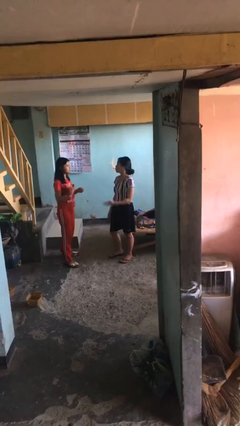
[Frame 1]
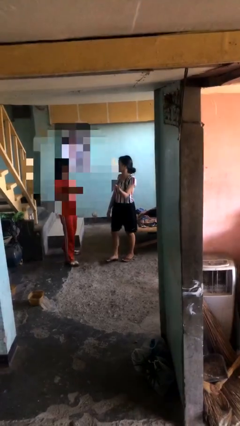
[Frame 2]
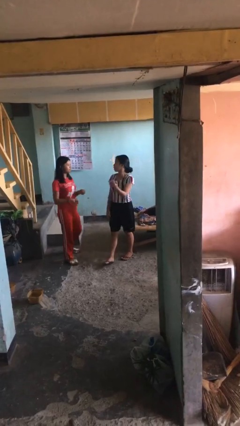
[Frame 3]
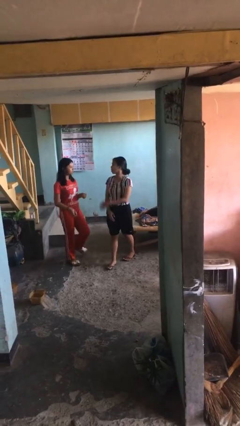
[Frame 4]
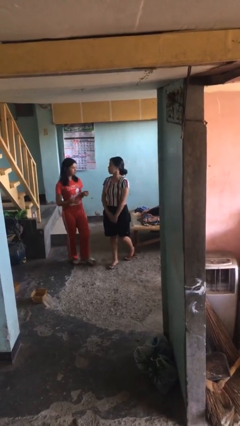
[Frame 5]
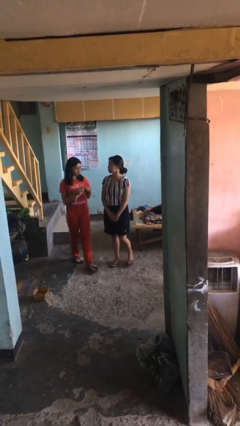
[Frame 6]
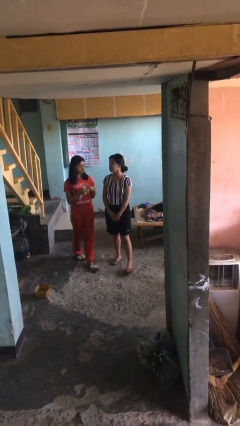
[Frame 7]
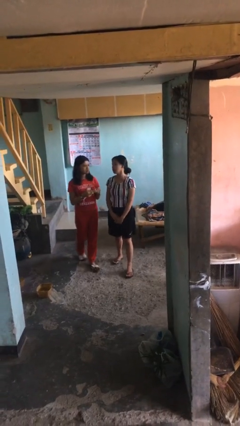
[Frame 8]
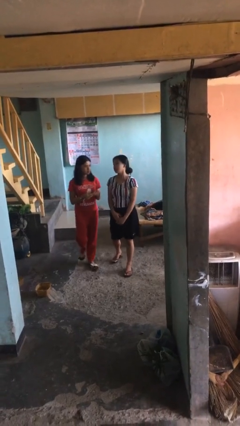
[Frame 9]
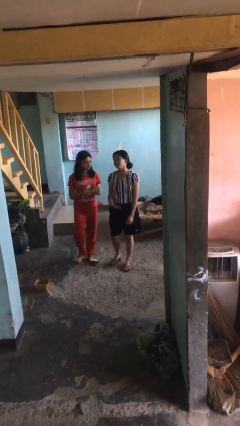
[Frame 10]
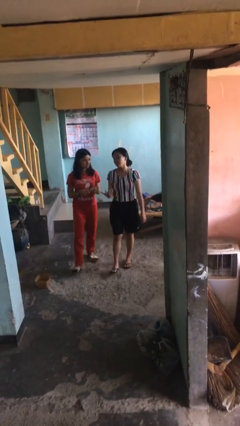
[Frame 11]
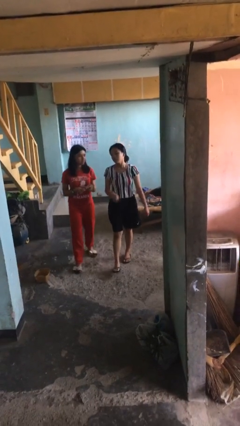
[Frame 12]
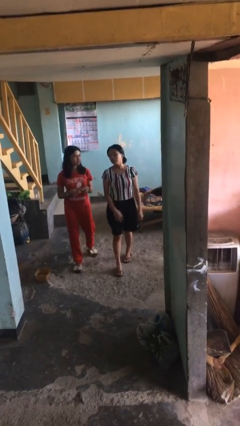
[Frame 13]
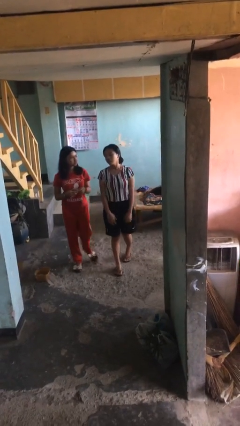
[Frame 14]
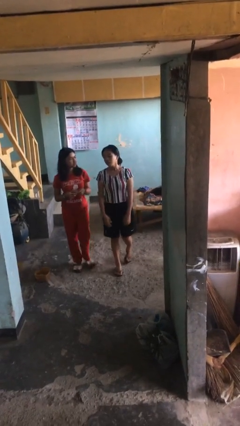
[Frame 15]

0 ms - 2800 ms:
person talks to person

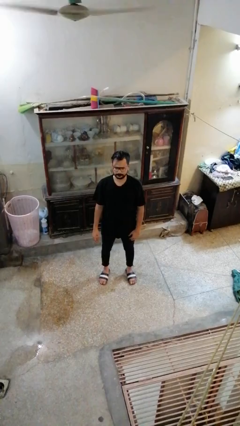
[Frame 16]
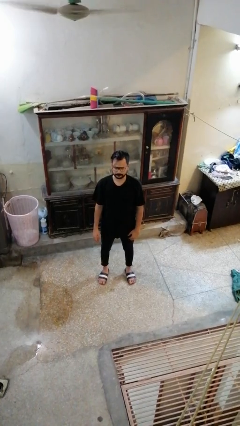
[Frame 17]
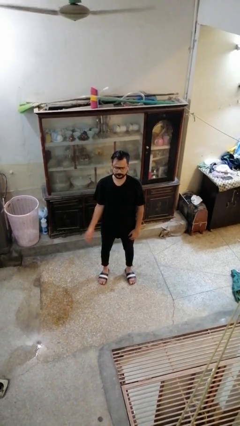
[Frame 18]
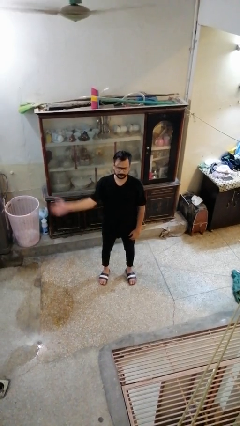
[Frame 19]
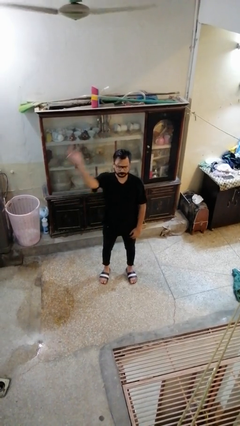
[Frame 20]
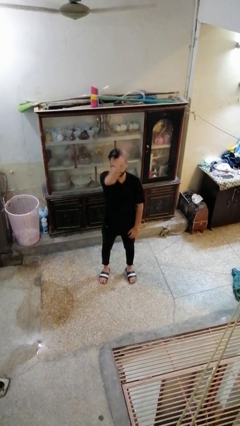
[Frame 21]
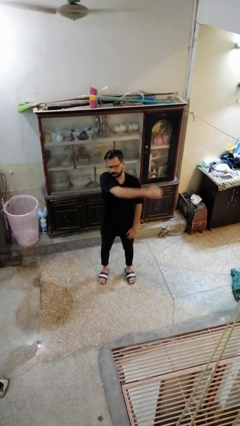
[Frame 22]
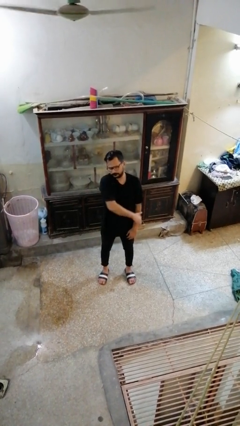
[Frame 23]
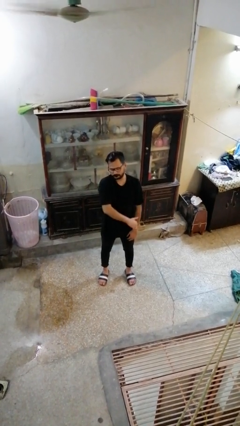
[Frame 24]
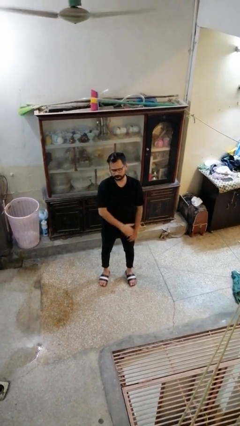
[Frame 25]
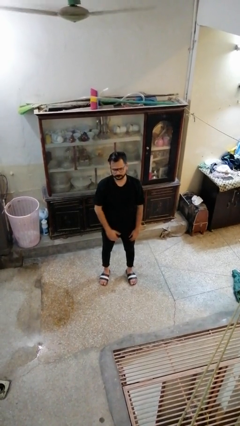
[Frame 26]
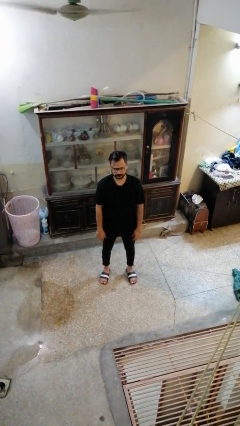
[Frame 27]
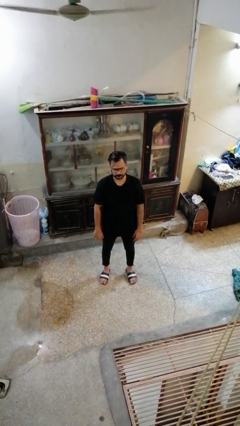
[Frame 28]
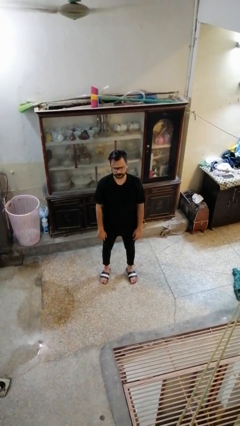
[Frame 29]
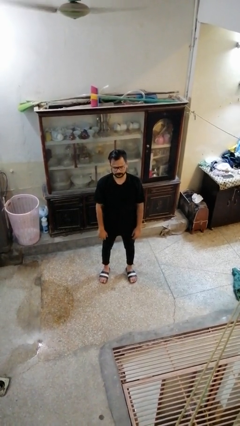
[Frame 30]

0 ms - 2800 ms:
person gestures swipe left

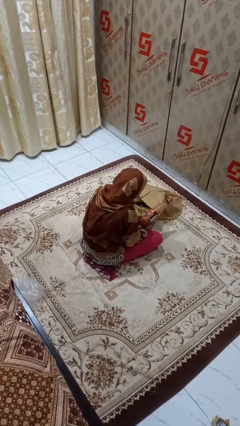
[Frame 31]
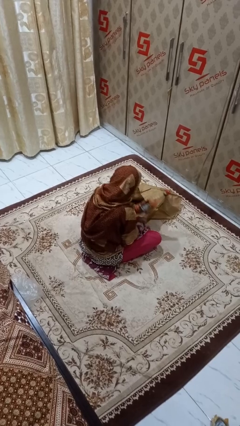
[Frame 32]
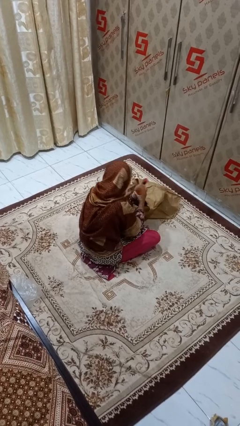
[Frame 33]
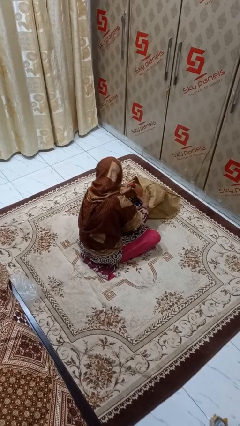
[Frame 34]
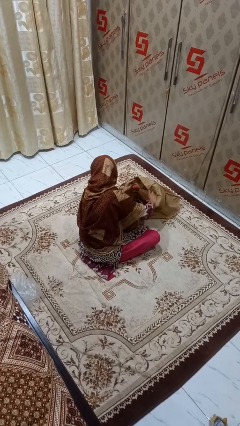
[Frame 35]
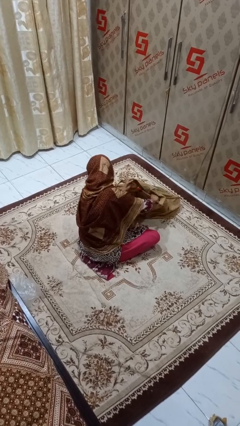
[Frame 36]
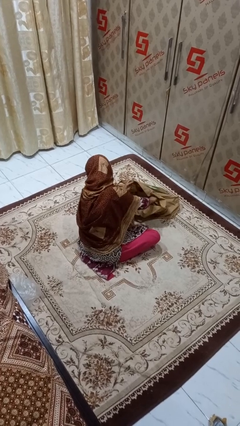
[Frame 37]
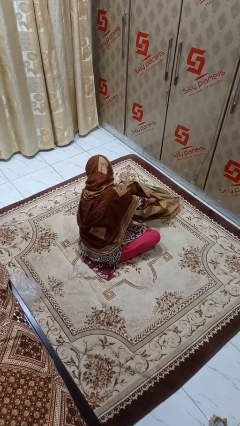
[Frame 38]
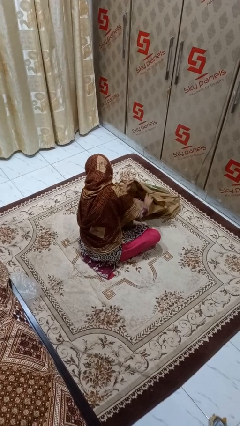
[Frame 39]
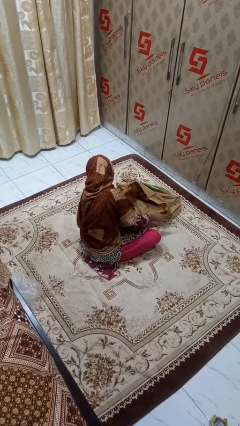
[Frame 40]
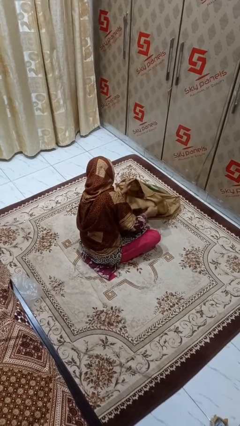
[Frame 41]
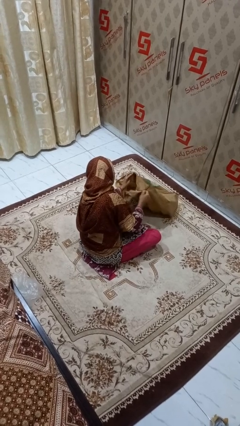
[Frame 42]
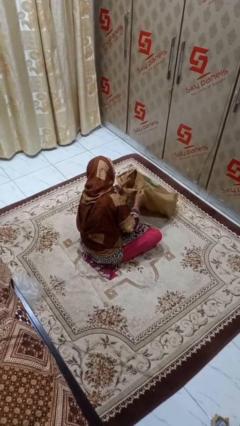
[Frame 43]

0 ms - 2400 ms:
person puts object into bag

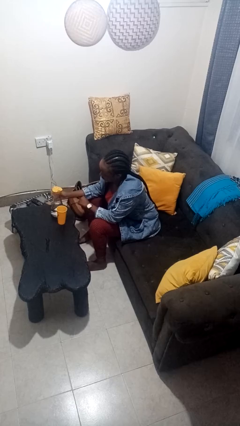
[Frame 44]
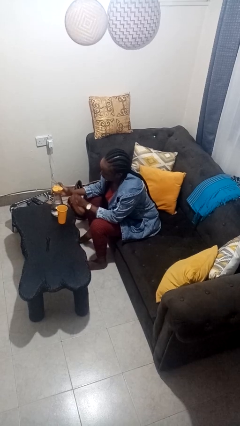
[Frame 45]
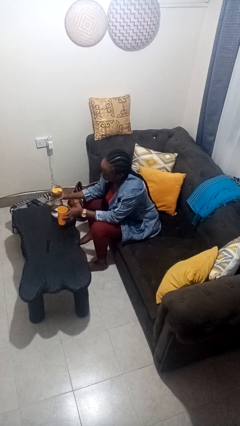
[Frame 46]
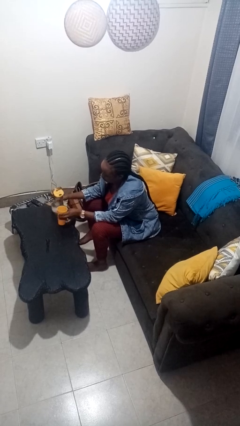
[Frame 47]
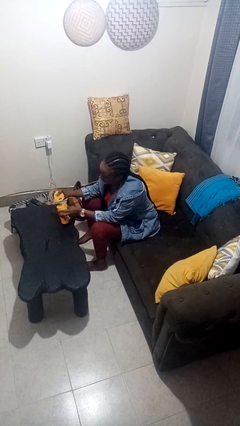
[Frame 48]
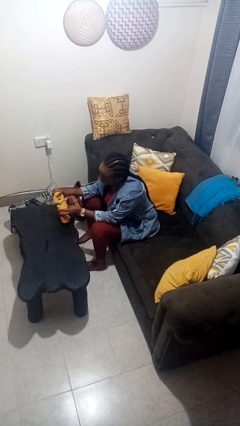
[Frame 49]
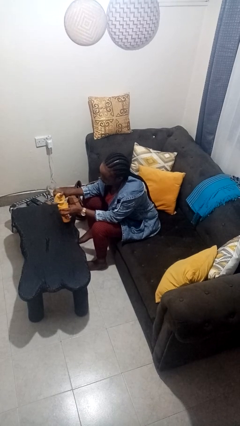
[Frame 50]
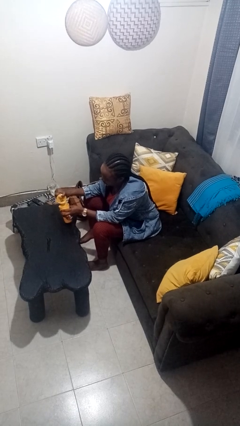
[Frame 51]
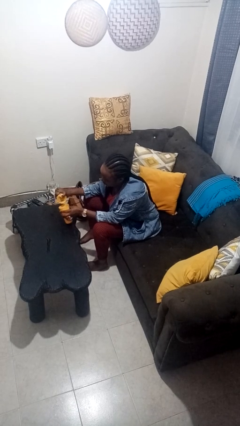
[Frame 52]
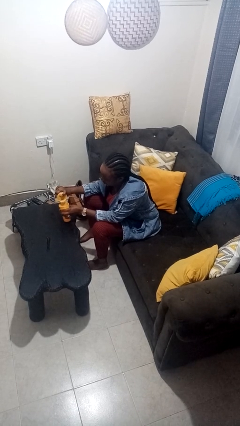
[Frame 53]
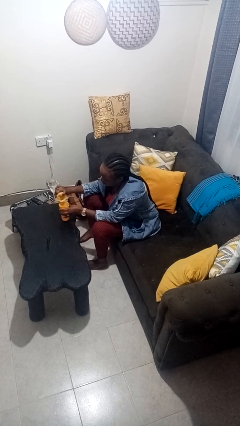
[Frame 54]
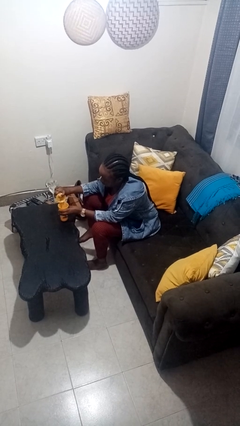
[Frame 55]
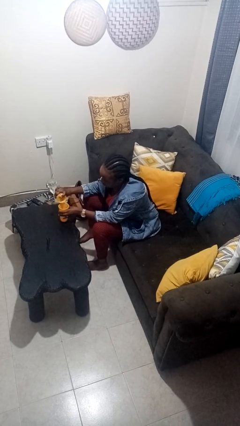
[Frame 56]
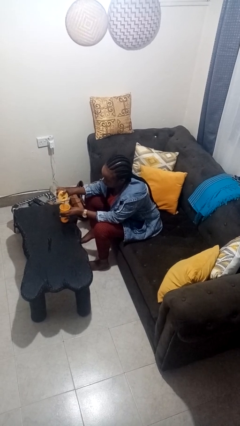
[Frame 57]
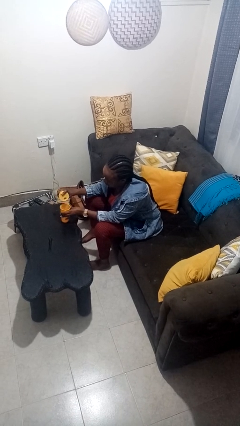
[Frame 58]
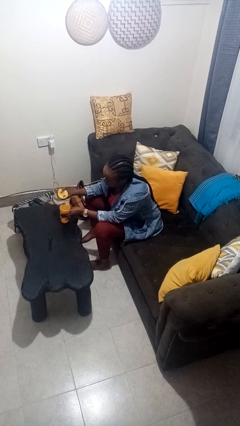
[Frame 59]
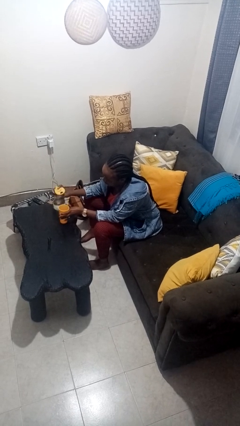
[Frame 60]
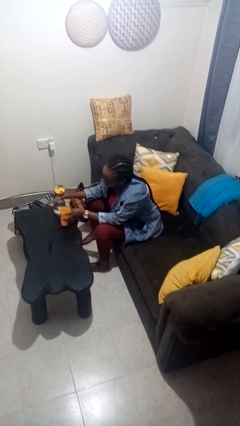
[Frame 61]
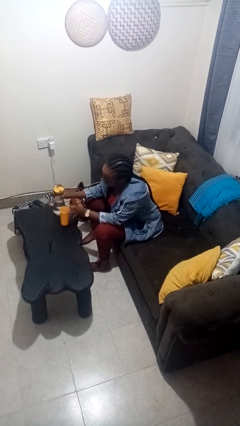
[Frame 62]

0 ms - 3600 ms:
person pours liquid into cup

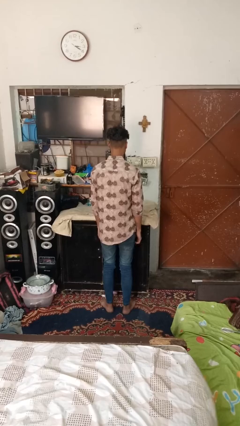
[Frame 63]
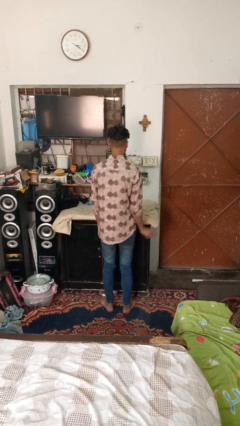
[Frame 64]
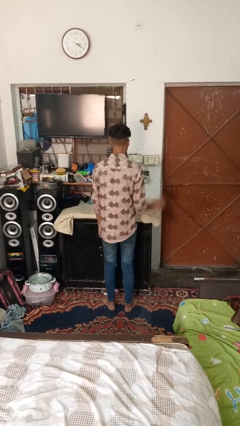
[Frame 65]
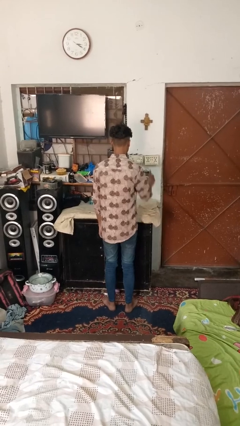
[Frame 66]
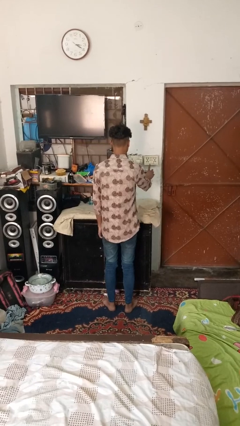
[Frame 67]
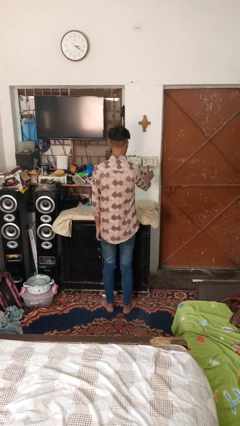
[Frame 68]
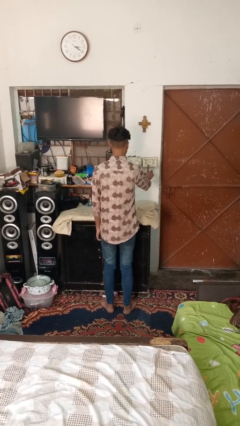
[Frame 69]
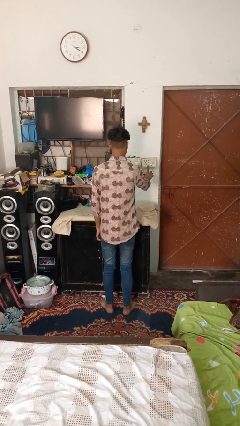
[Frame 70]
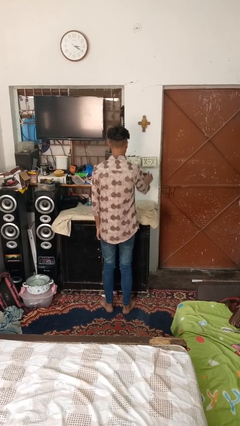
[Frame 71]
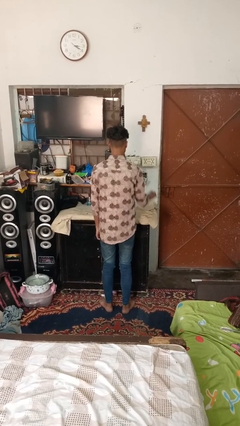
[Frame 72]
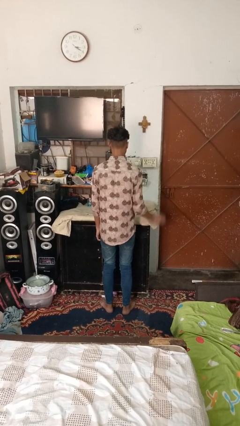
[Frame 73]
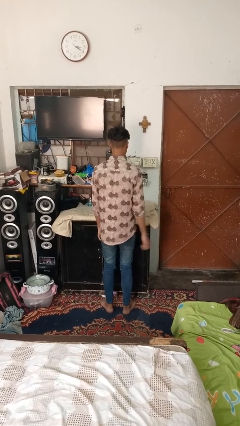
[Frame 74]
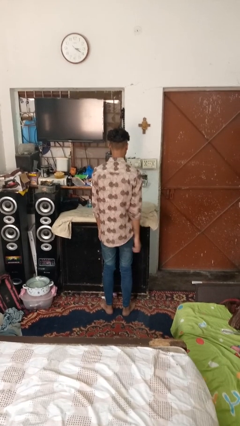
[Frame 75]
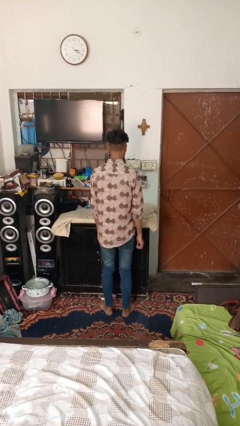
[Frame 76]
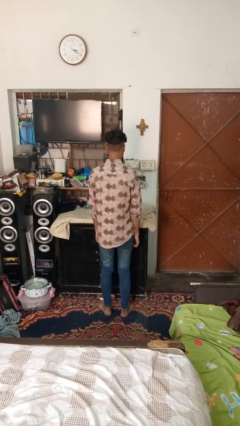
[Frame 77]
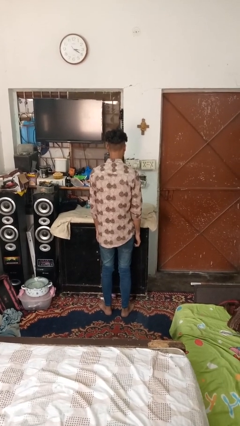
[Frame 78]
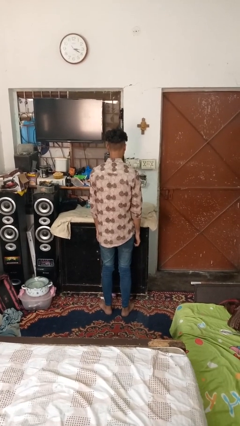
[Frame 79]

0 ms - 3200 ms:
person turns on fan

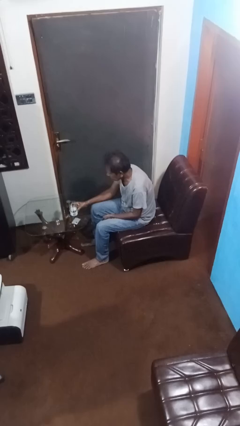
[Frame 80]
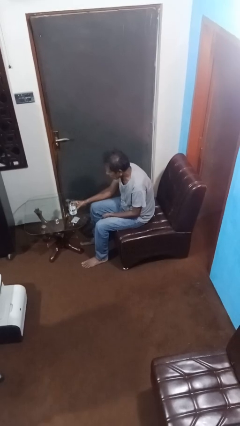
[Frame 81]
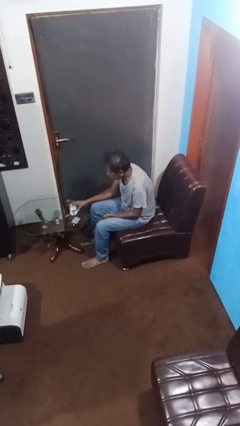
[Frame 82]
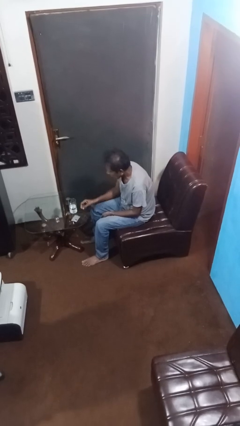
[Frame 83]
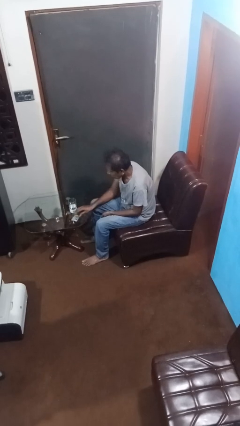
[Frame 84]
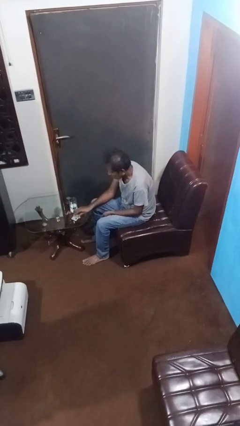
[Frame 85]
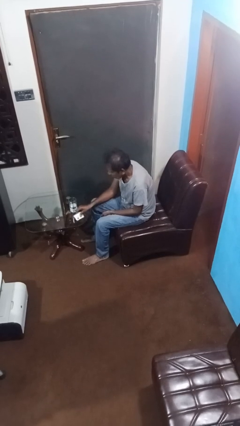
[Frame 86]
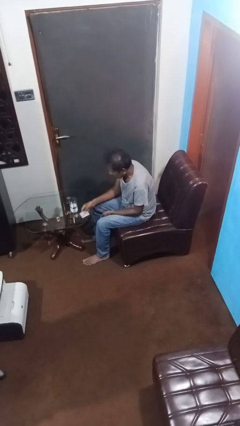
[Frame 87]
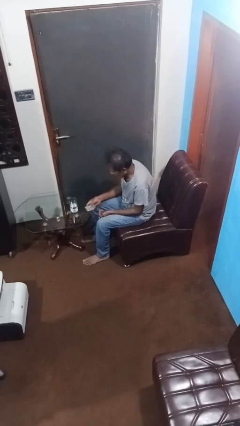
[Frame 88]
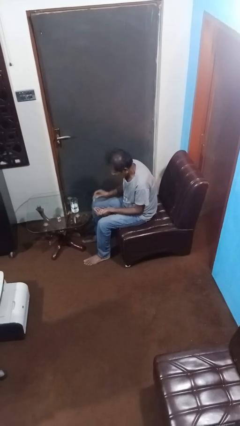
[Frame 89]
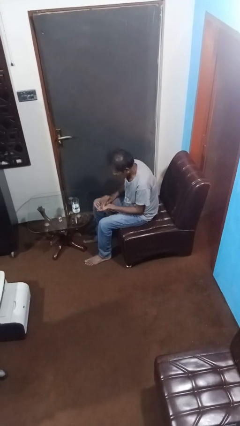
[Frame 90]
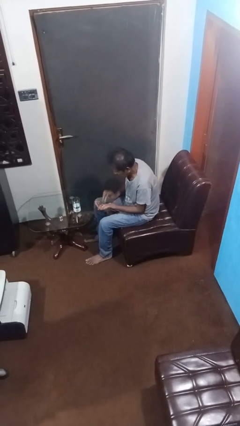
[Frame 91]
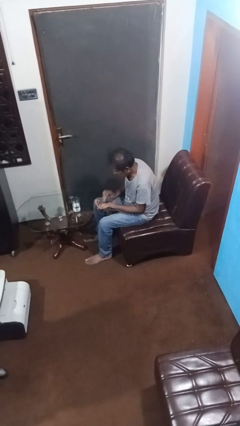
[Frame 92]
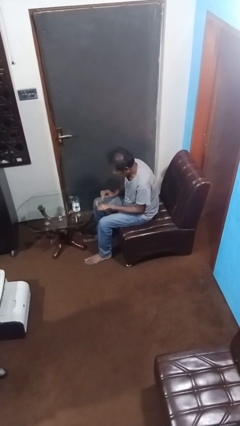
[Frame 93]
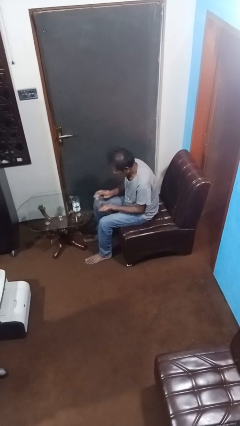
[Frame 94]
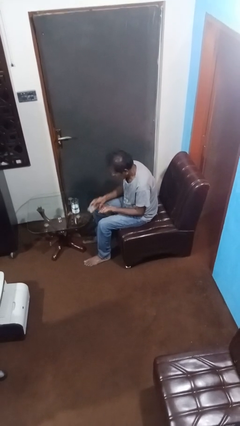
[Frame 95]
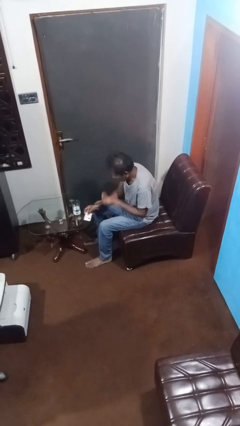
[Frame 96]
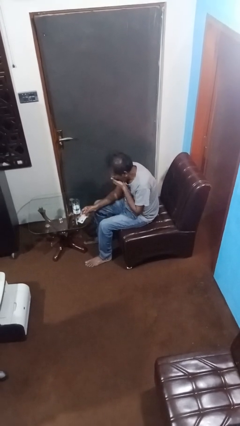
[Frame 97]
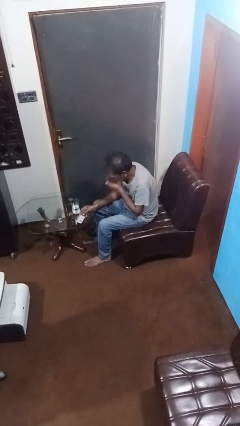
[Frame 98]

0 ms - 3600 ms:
person takes medicine pills
